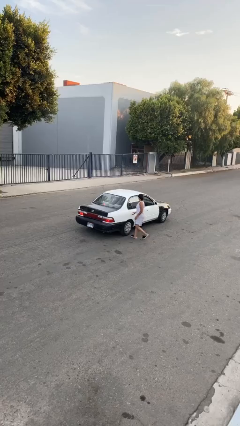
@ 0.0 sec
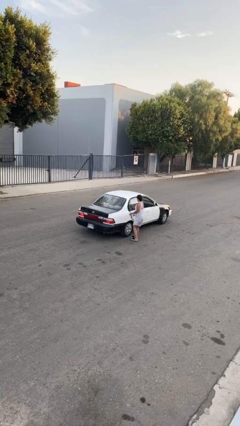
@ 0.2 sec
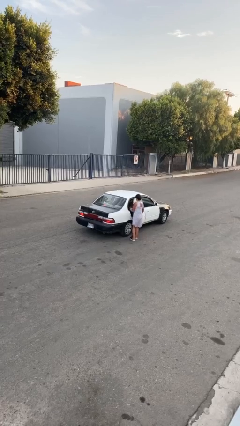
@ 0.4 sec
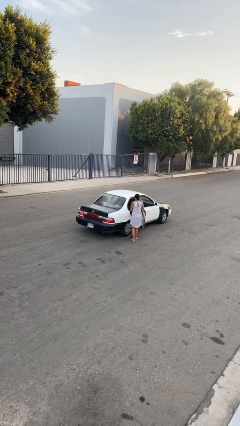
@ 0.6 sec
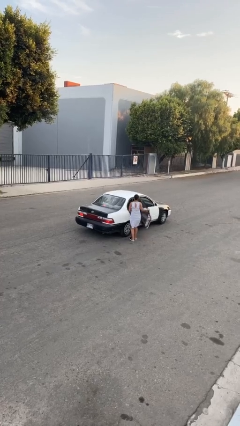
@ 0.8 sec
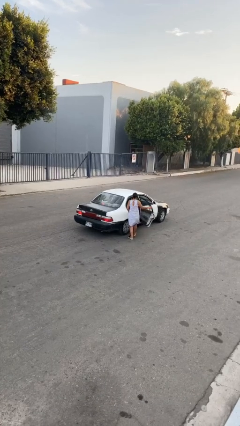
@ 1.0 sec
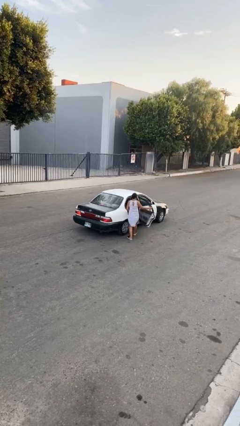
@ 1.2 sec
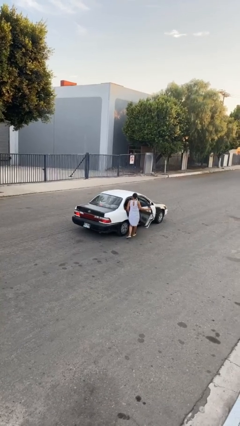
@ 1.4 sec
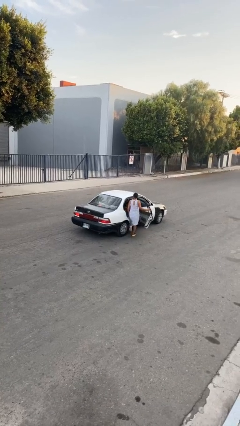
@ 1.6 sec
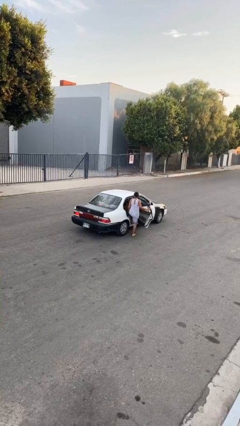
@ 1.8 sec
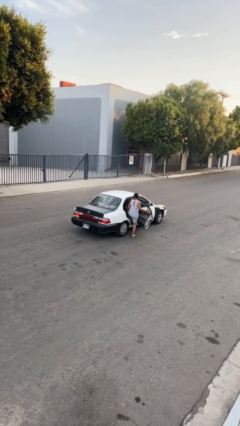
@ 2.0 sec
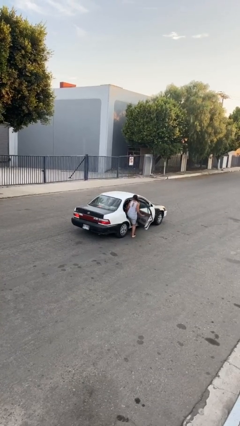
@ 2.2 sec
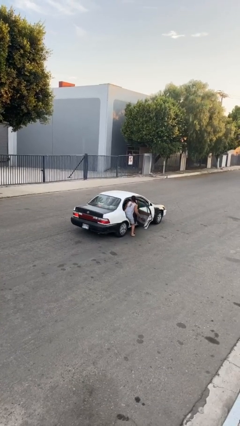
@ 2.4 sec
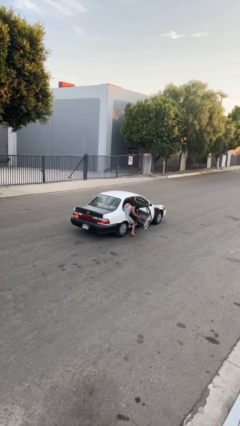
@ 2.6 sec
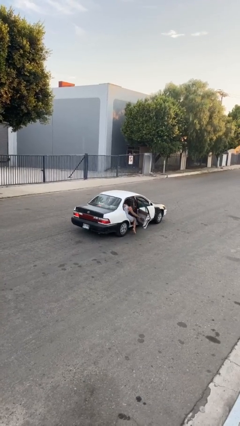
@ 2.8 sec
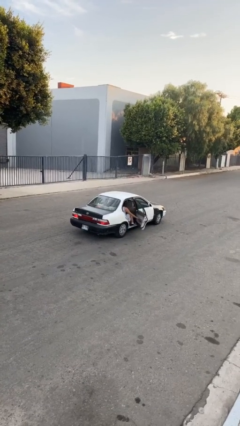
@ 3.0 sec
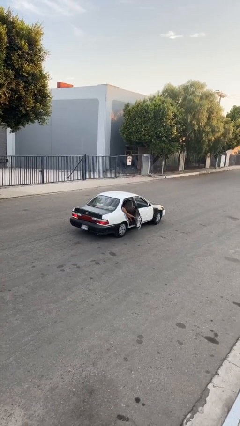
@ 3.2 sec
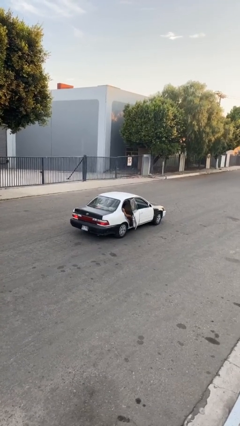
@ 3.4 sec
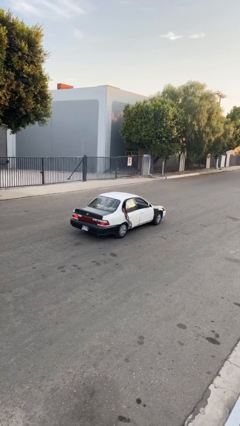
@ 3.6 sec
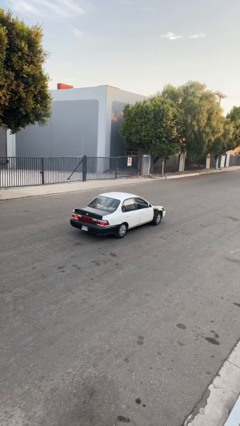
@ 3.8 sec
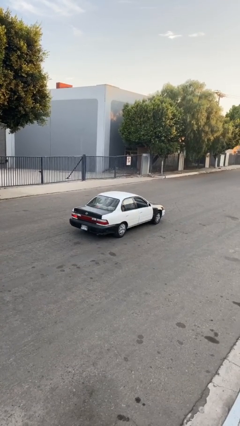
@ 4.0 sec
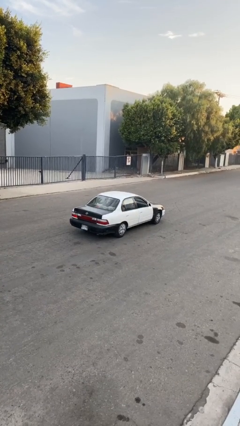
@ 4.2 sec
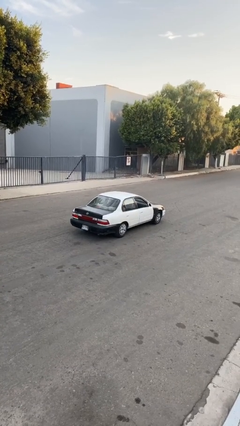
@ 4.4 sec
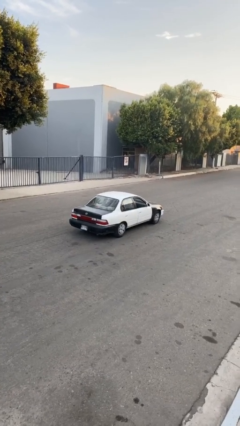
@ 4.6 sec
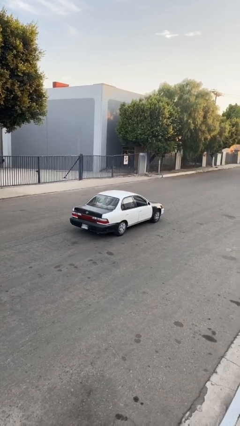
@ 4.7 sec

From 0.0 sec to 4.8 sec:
car picks up person

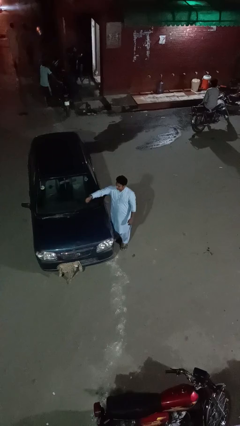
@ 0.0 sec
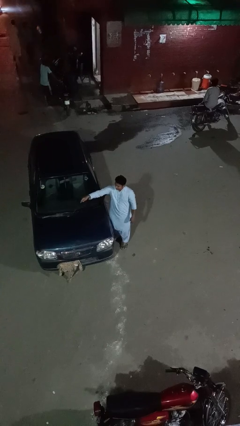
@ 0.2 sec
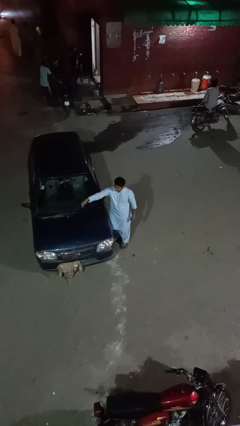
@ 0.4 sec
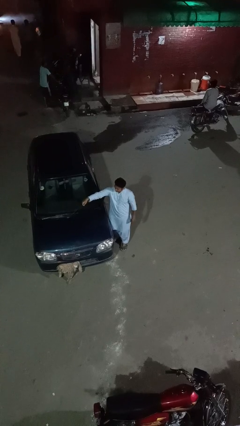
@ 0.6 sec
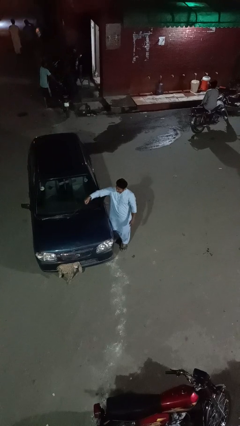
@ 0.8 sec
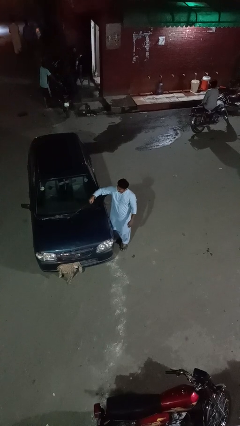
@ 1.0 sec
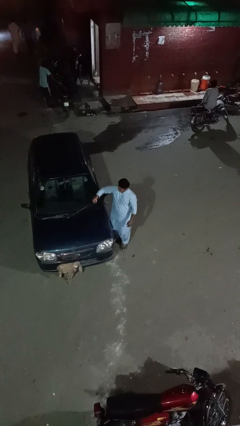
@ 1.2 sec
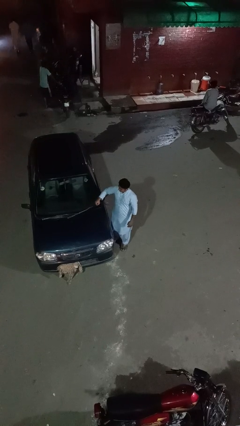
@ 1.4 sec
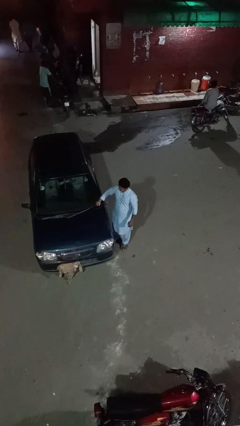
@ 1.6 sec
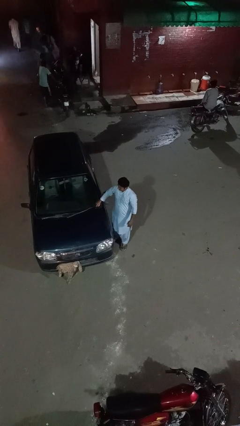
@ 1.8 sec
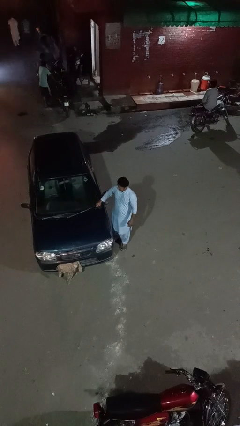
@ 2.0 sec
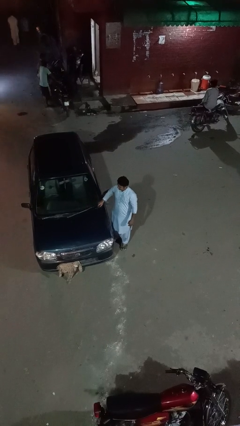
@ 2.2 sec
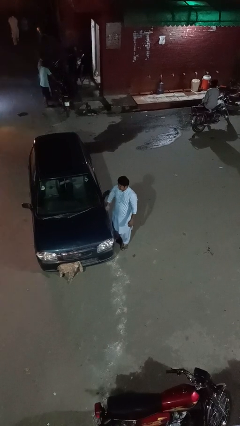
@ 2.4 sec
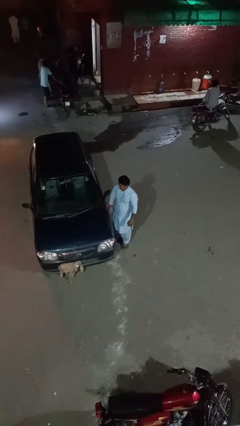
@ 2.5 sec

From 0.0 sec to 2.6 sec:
person flips down car wipers

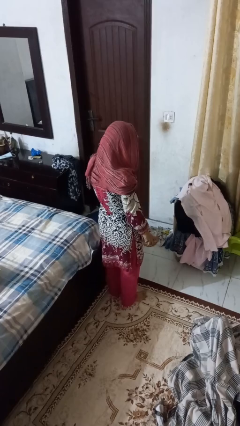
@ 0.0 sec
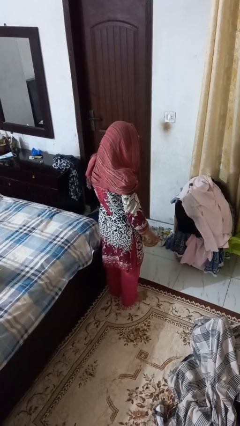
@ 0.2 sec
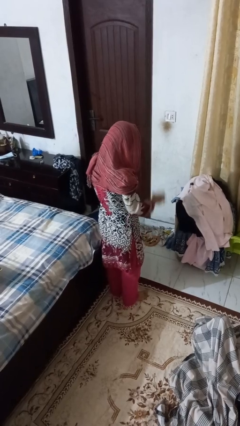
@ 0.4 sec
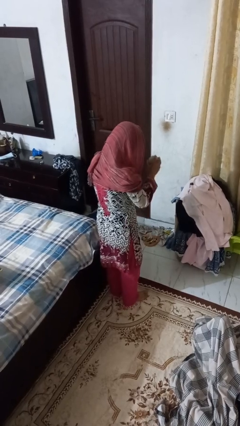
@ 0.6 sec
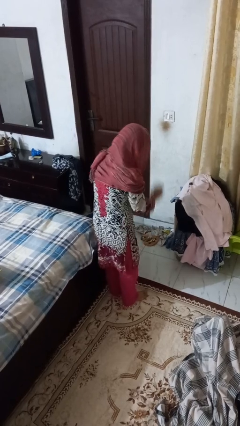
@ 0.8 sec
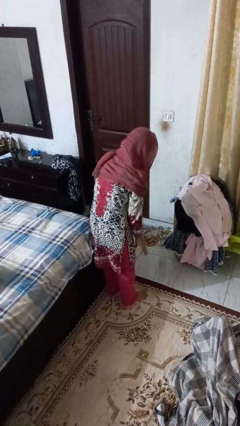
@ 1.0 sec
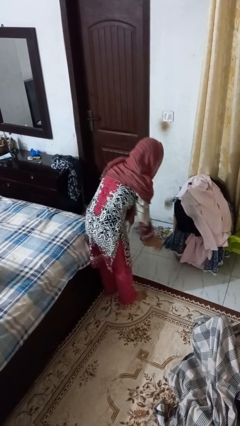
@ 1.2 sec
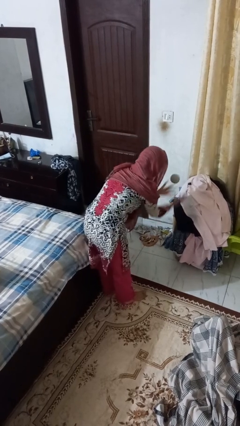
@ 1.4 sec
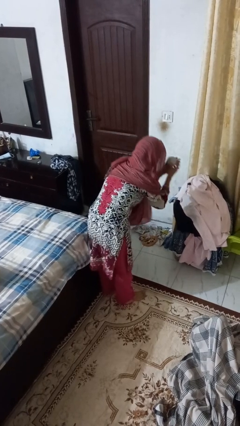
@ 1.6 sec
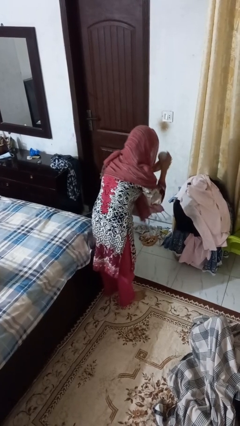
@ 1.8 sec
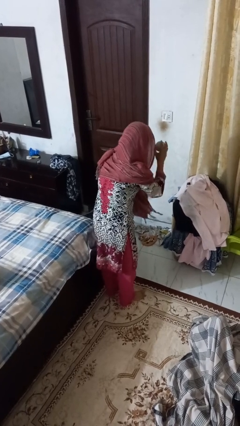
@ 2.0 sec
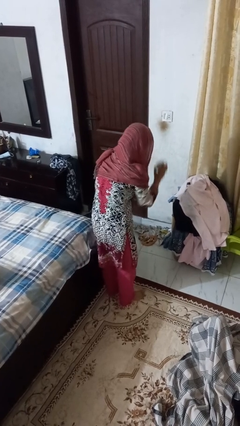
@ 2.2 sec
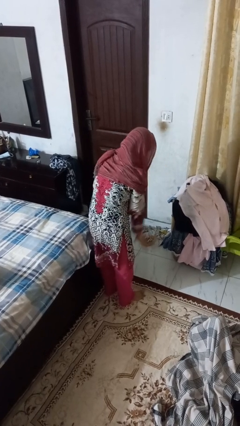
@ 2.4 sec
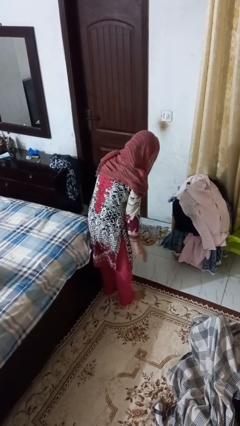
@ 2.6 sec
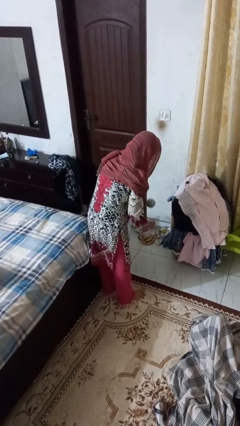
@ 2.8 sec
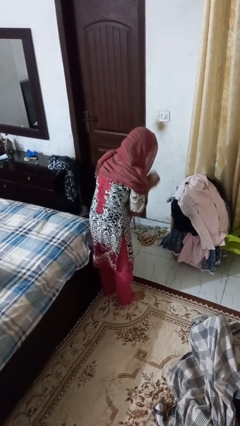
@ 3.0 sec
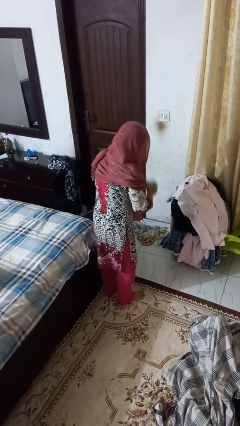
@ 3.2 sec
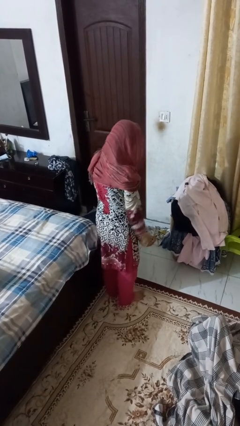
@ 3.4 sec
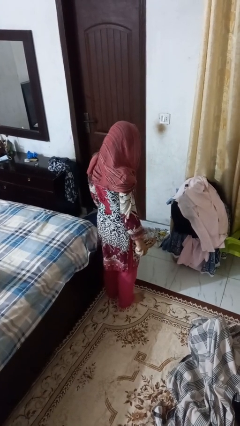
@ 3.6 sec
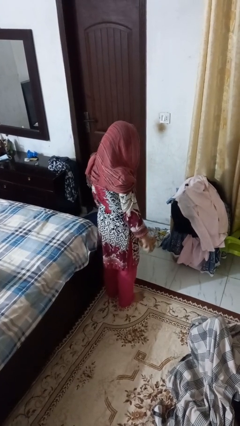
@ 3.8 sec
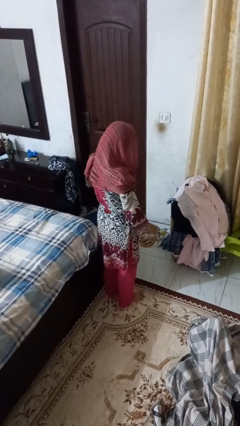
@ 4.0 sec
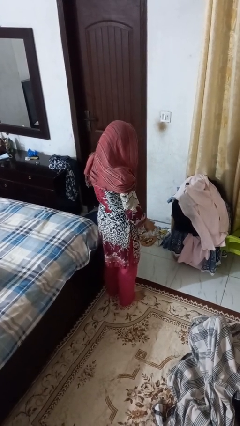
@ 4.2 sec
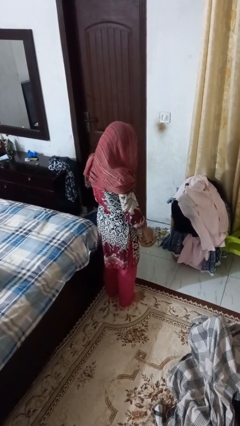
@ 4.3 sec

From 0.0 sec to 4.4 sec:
person bounces ball on floor

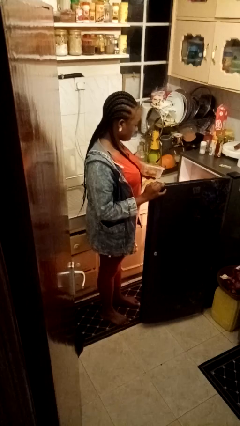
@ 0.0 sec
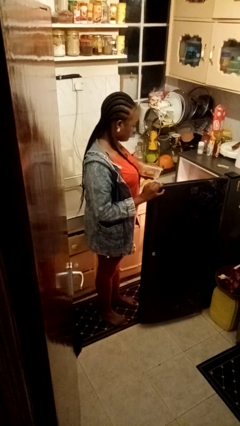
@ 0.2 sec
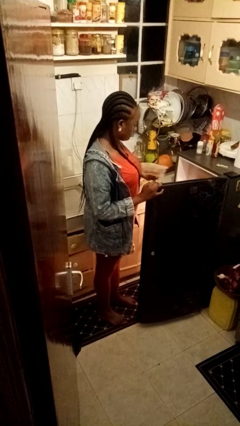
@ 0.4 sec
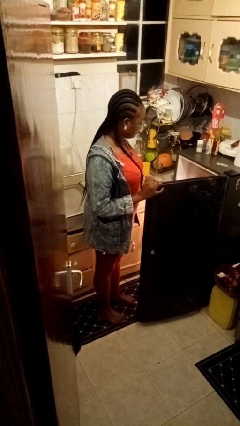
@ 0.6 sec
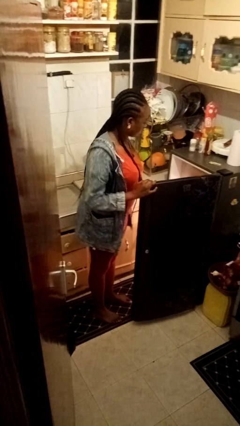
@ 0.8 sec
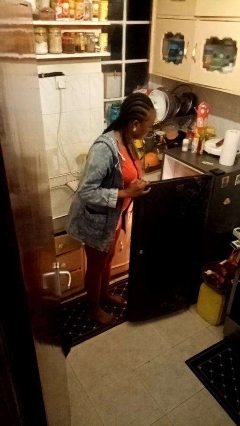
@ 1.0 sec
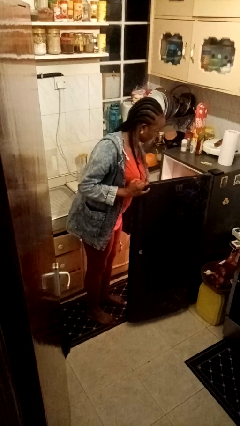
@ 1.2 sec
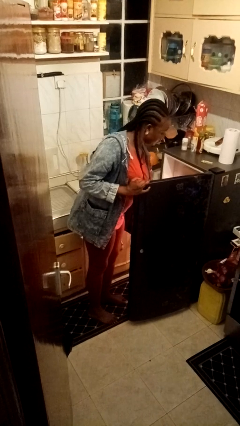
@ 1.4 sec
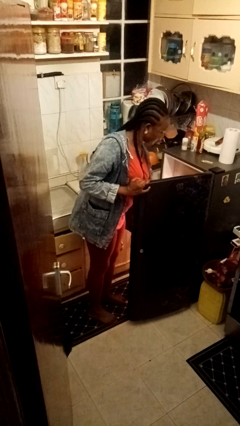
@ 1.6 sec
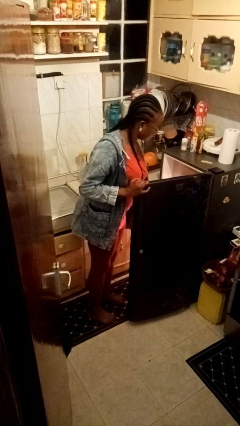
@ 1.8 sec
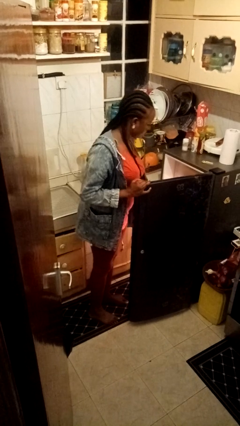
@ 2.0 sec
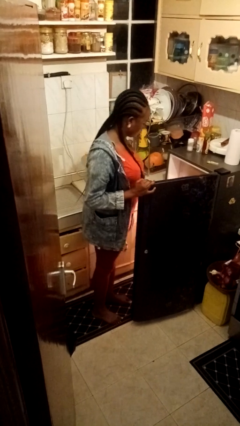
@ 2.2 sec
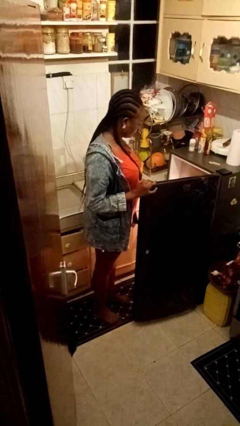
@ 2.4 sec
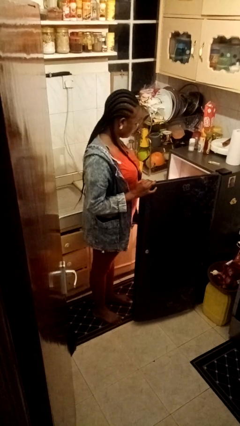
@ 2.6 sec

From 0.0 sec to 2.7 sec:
person puts object into refrigerator

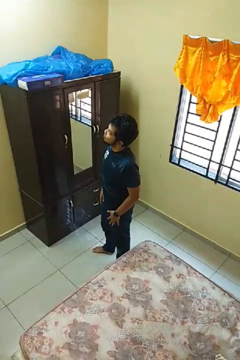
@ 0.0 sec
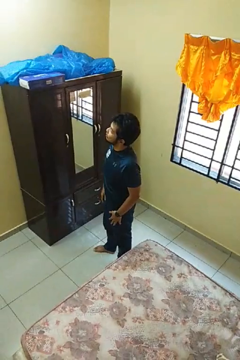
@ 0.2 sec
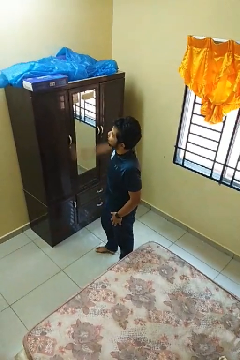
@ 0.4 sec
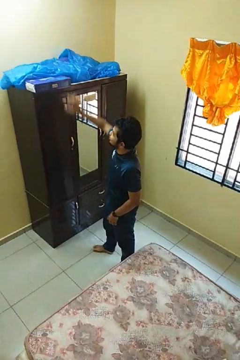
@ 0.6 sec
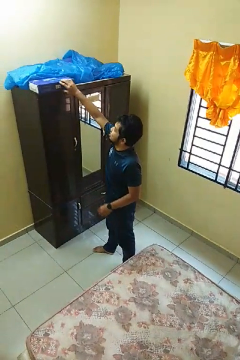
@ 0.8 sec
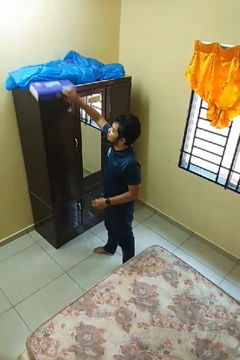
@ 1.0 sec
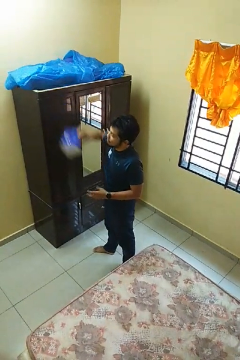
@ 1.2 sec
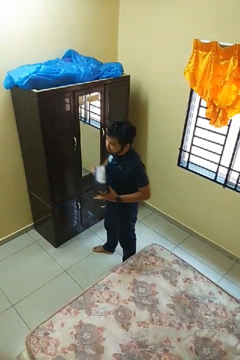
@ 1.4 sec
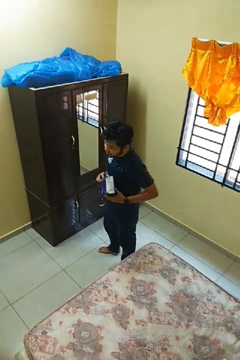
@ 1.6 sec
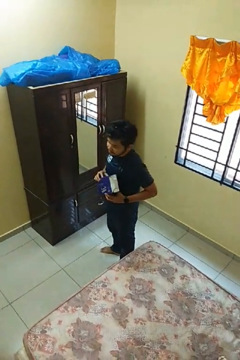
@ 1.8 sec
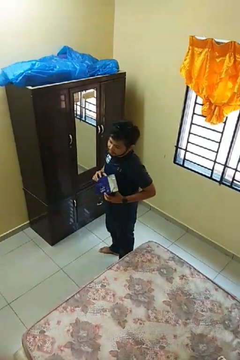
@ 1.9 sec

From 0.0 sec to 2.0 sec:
person picks up object from countertop

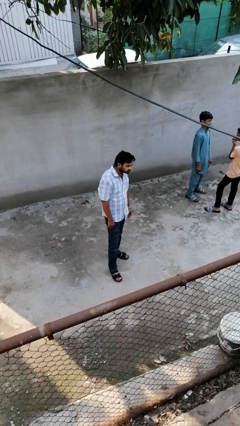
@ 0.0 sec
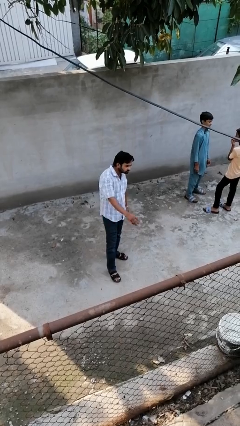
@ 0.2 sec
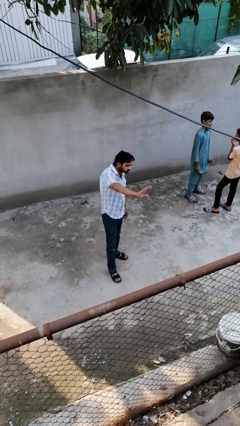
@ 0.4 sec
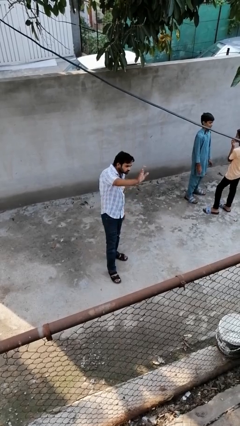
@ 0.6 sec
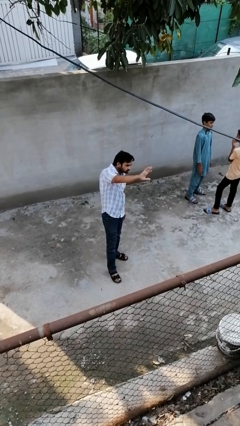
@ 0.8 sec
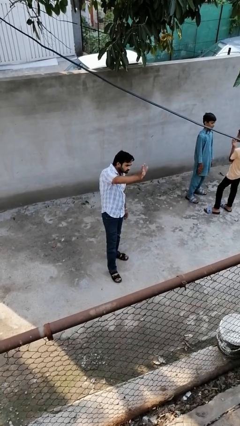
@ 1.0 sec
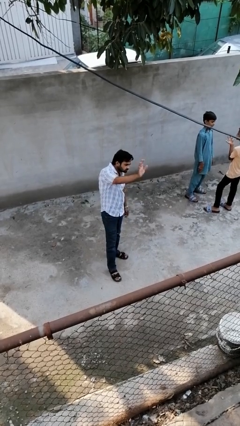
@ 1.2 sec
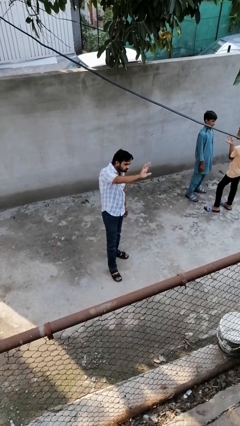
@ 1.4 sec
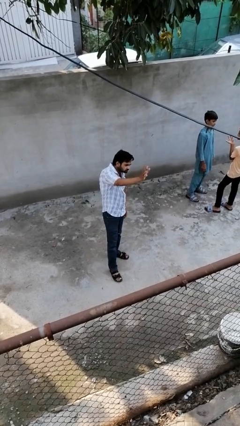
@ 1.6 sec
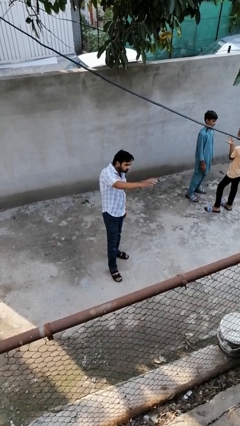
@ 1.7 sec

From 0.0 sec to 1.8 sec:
person waves at person
